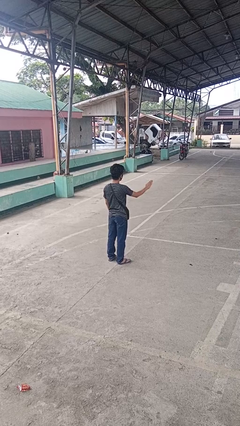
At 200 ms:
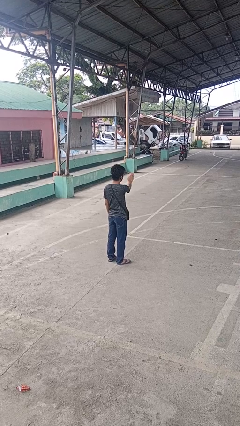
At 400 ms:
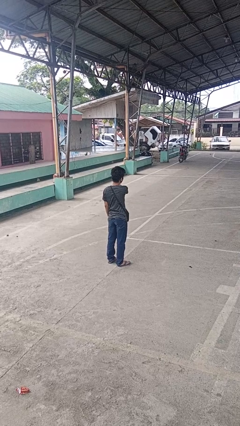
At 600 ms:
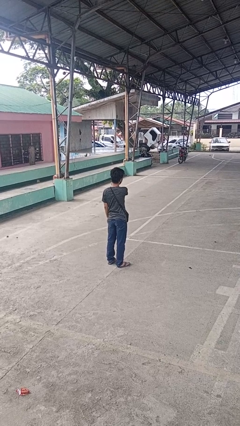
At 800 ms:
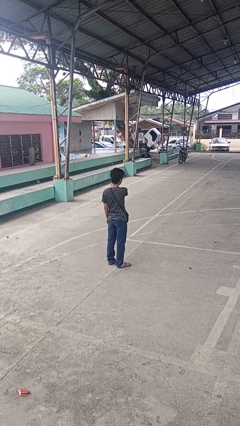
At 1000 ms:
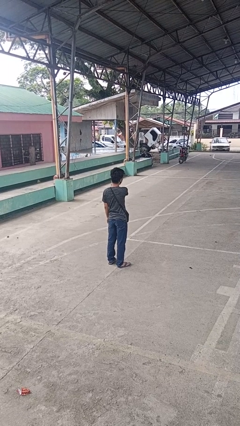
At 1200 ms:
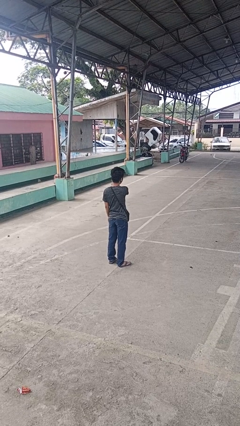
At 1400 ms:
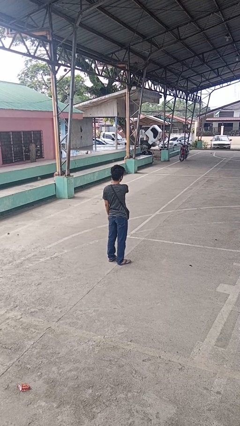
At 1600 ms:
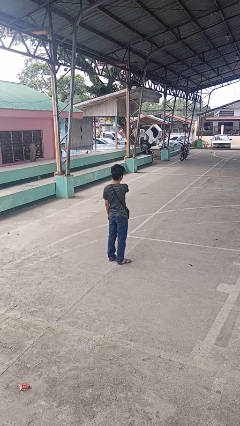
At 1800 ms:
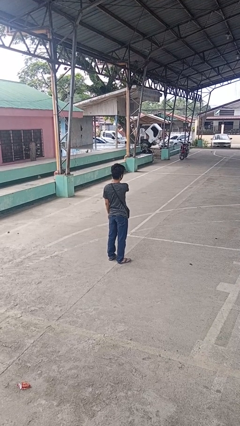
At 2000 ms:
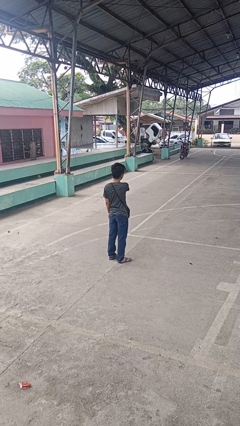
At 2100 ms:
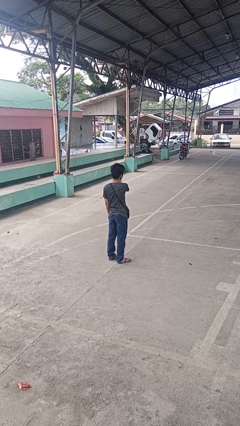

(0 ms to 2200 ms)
person gestures swipe left

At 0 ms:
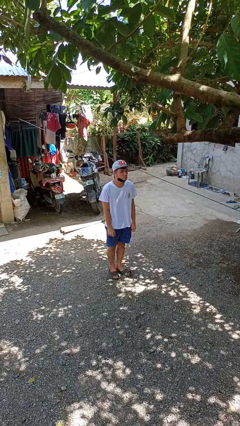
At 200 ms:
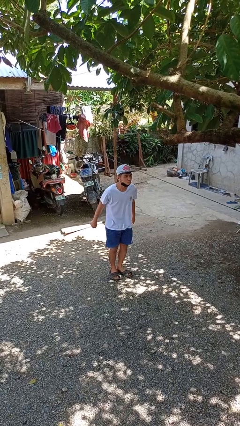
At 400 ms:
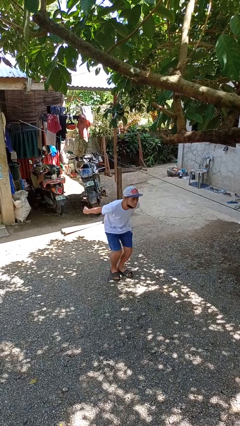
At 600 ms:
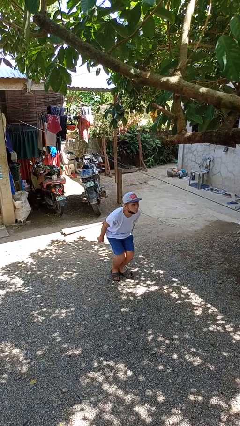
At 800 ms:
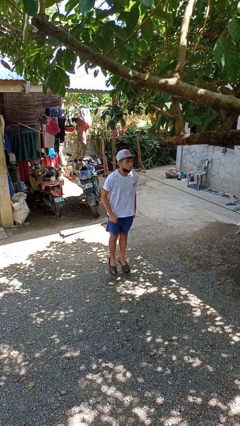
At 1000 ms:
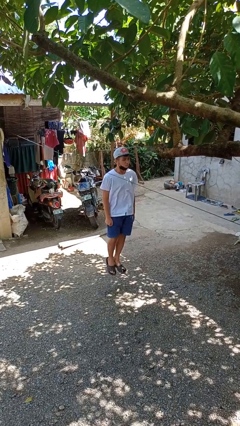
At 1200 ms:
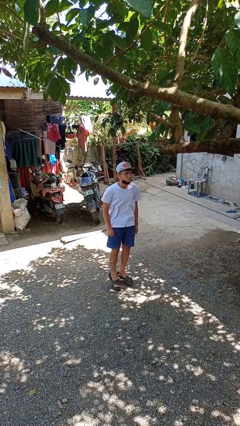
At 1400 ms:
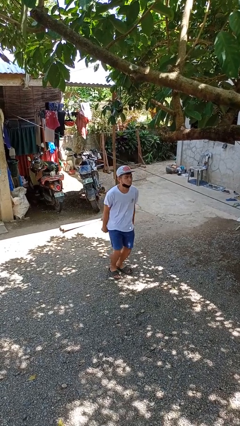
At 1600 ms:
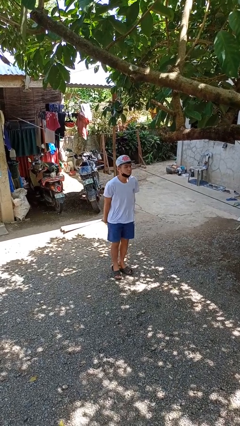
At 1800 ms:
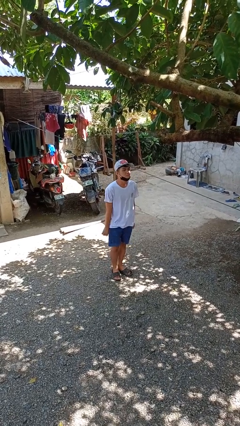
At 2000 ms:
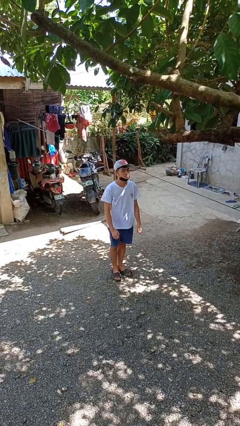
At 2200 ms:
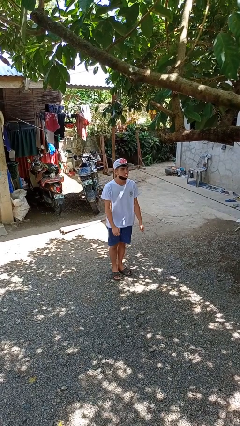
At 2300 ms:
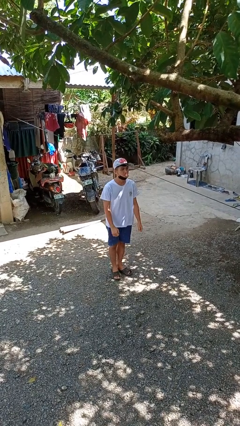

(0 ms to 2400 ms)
person jumps

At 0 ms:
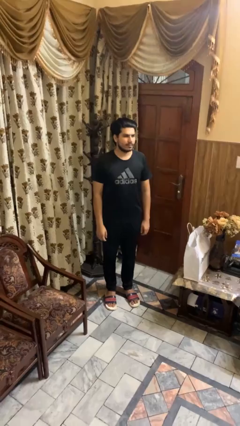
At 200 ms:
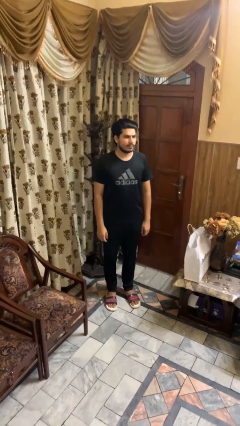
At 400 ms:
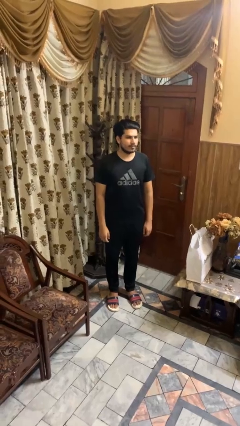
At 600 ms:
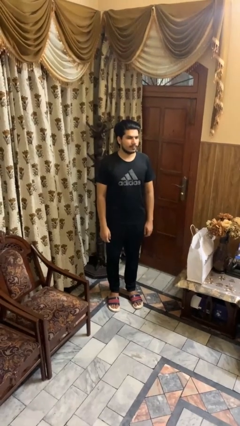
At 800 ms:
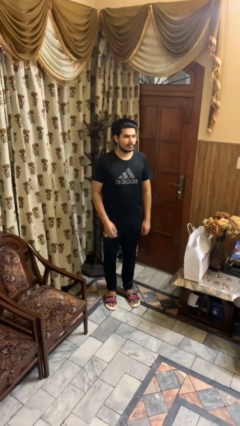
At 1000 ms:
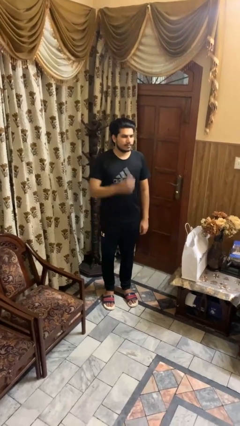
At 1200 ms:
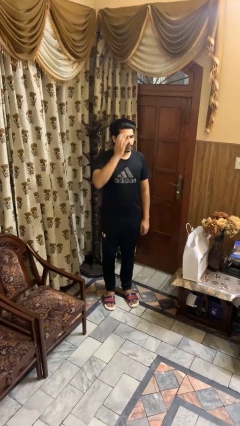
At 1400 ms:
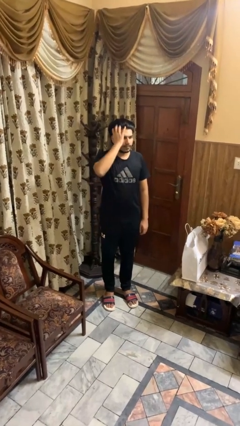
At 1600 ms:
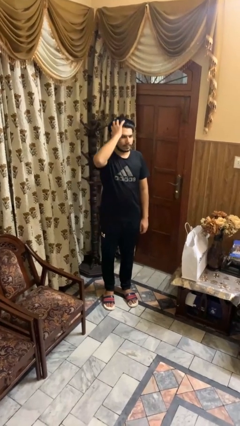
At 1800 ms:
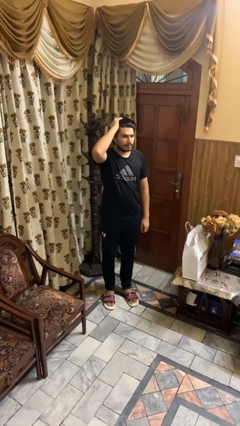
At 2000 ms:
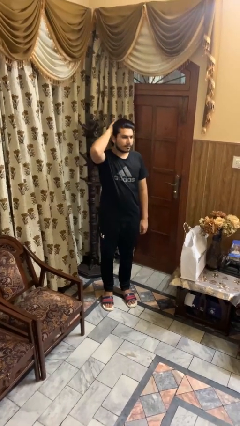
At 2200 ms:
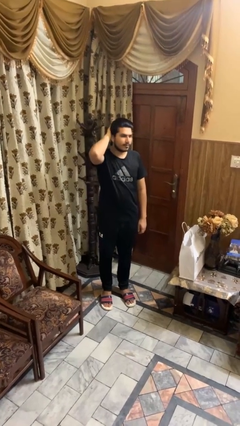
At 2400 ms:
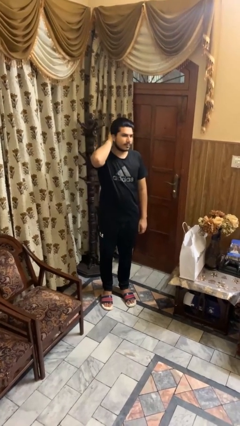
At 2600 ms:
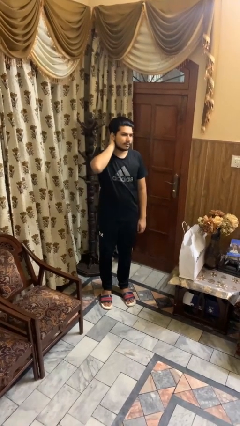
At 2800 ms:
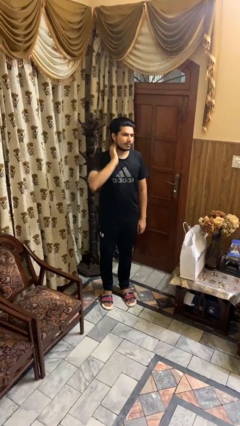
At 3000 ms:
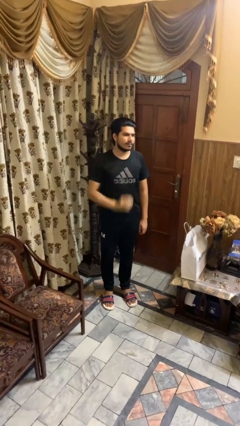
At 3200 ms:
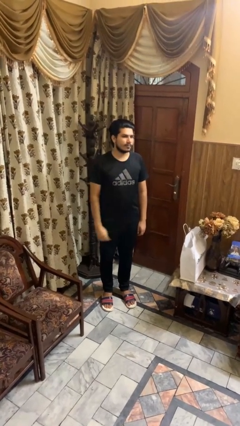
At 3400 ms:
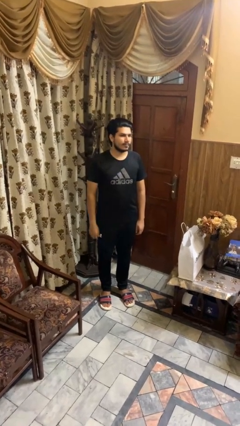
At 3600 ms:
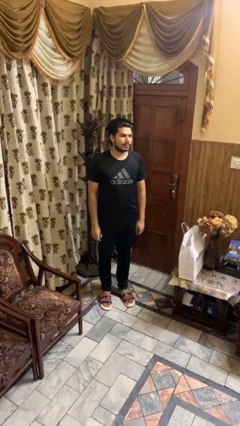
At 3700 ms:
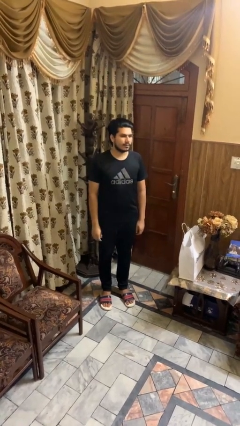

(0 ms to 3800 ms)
person strokes hair

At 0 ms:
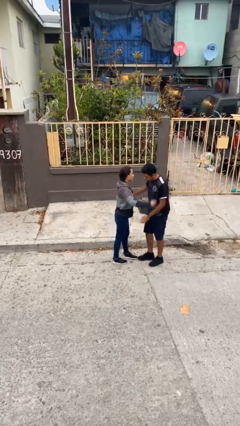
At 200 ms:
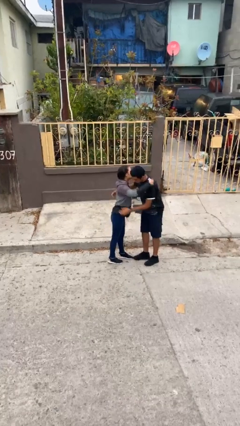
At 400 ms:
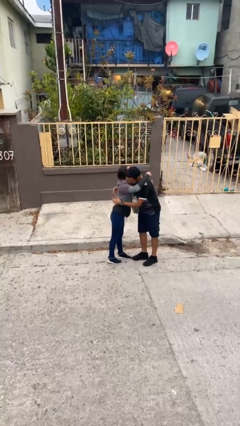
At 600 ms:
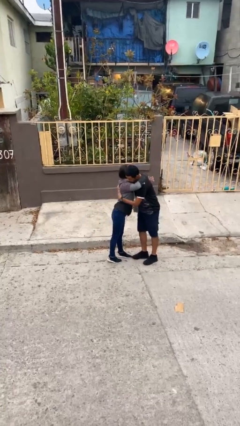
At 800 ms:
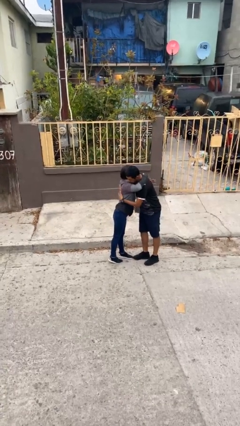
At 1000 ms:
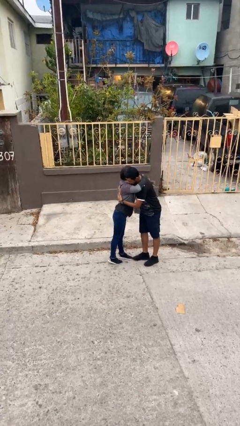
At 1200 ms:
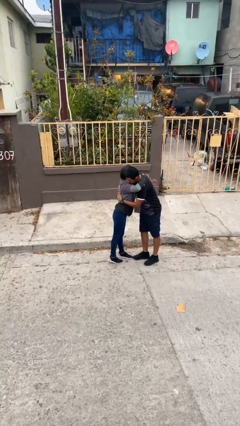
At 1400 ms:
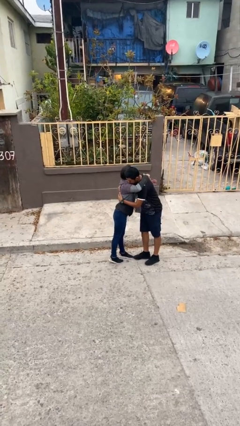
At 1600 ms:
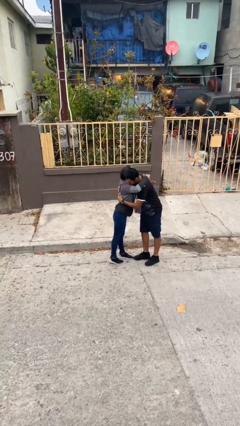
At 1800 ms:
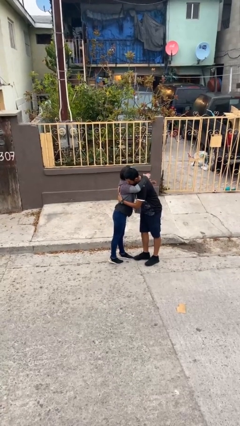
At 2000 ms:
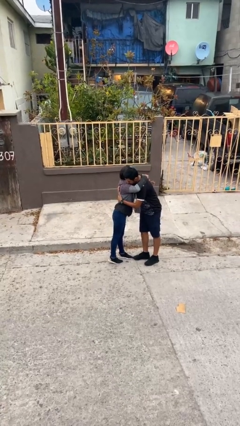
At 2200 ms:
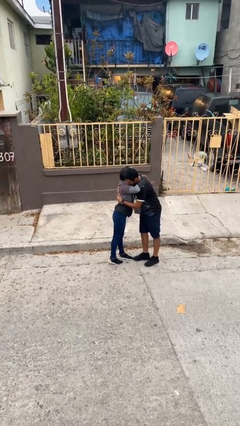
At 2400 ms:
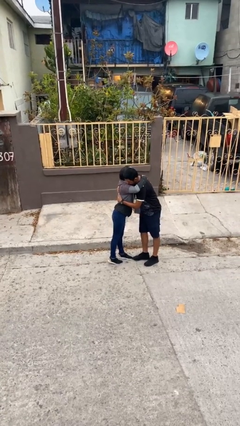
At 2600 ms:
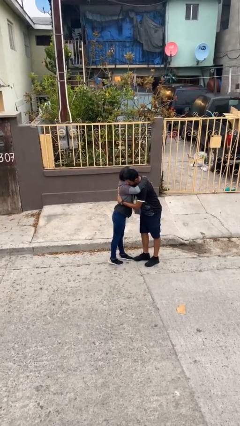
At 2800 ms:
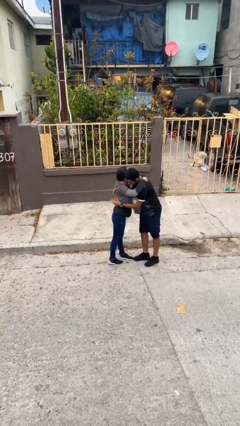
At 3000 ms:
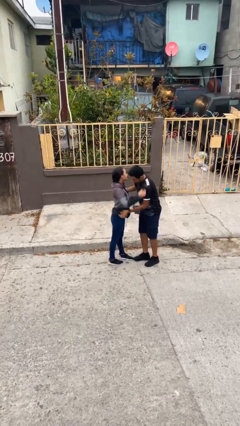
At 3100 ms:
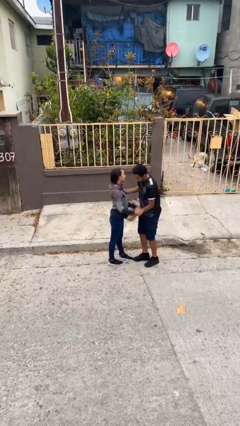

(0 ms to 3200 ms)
person embraces person

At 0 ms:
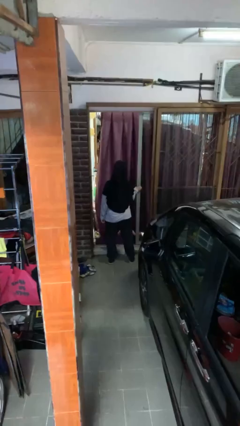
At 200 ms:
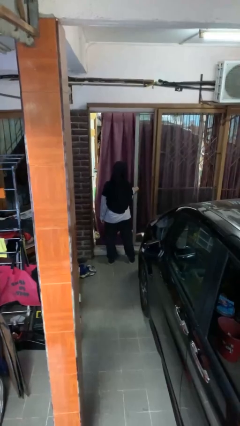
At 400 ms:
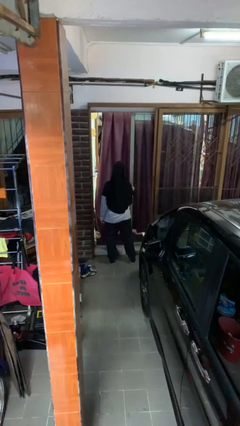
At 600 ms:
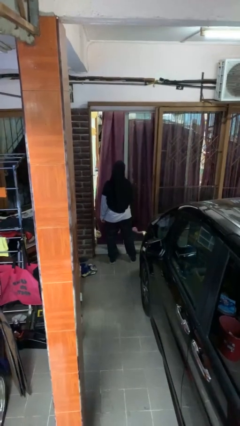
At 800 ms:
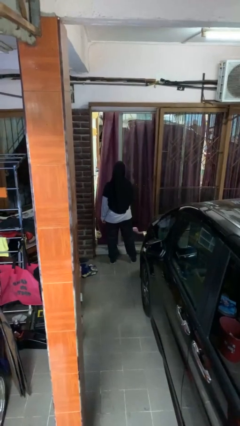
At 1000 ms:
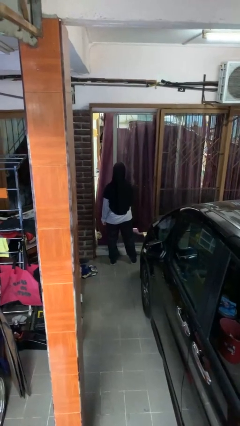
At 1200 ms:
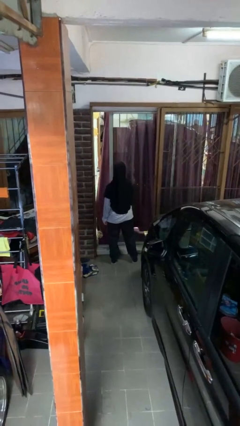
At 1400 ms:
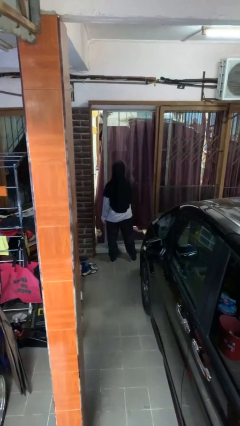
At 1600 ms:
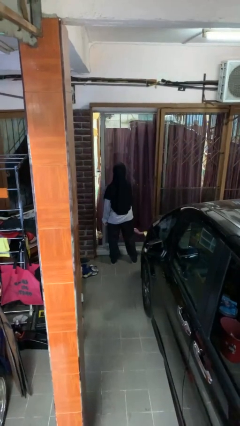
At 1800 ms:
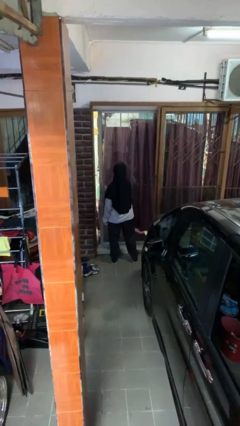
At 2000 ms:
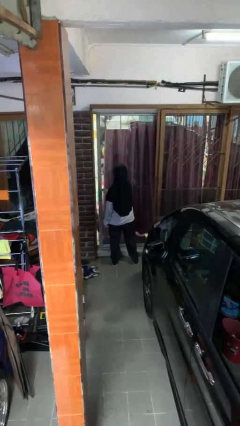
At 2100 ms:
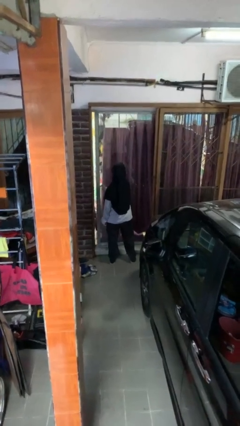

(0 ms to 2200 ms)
person closes sliding door

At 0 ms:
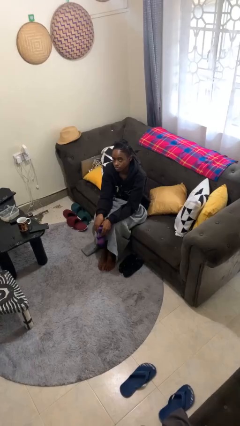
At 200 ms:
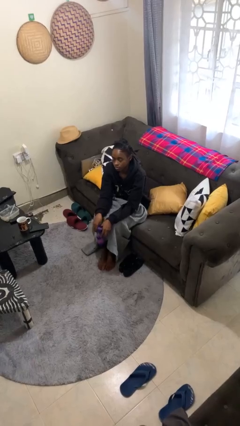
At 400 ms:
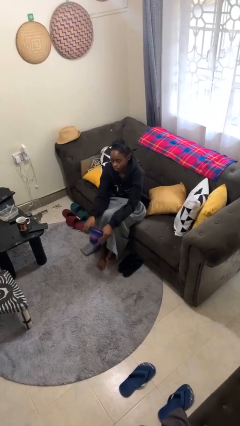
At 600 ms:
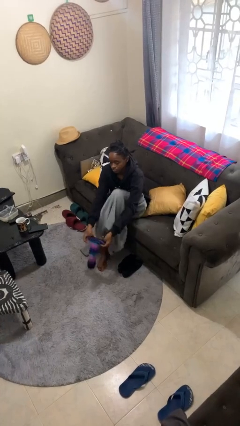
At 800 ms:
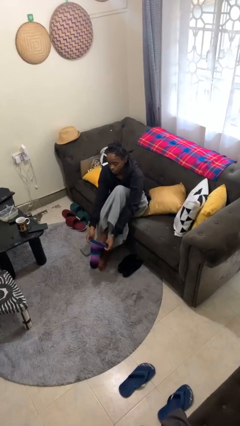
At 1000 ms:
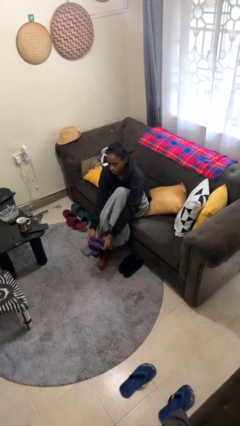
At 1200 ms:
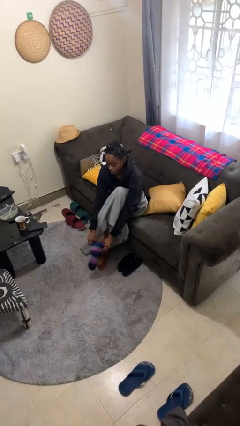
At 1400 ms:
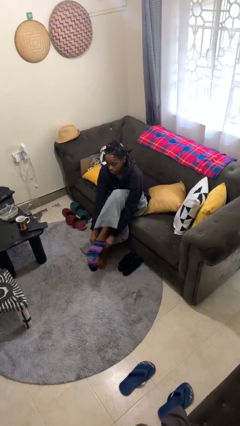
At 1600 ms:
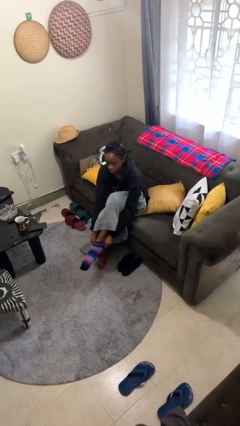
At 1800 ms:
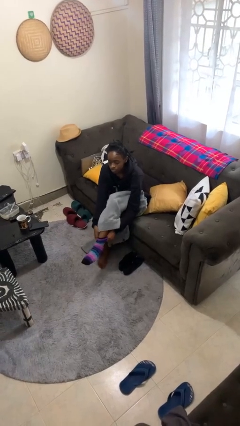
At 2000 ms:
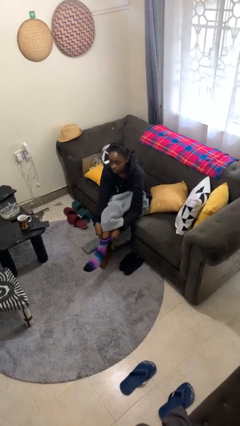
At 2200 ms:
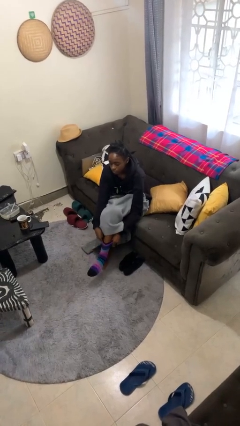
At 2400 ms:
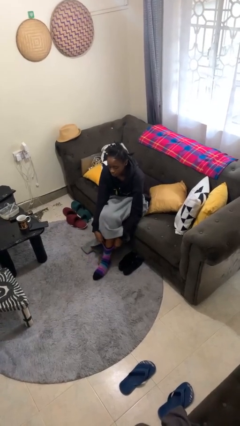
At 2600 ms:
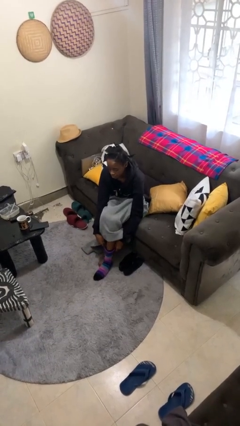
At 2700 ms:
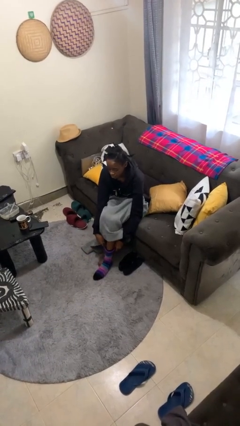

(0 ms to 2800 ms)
person puts on socks

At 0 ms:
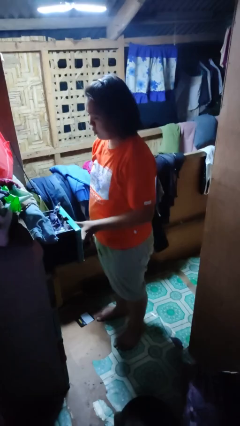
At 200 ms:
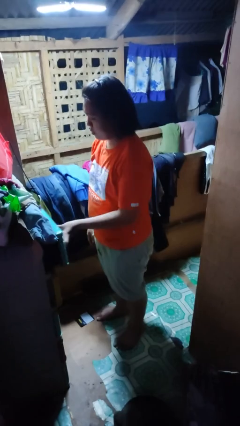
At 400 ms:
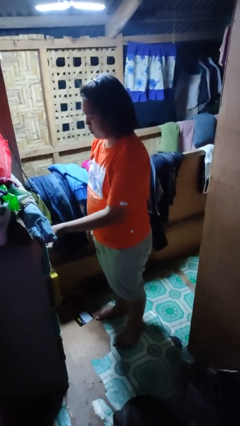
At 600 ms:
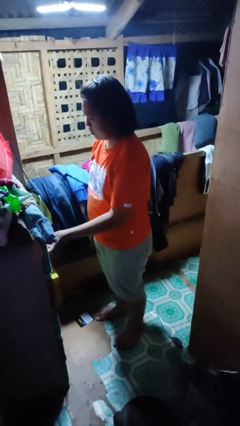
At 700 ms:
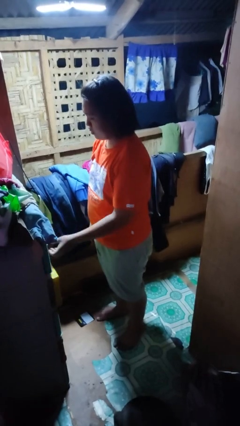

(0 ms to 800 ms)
person closes dresser drawer
